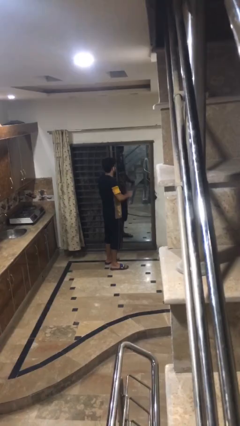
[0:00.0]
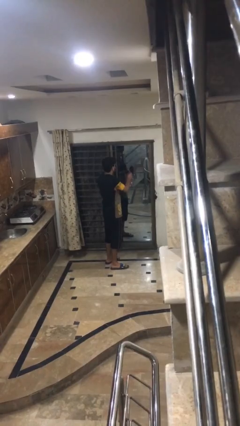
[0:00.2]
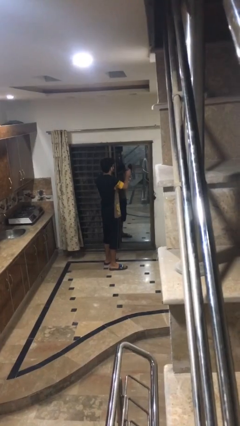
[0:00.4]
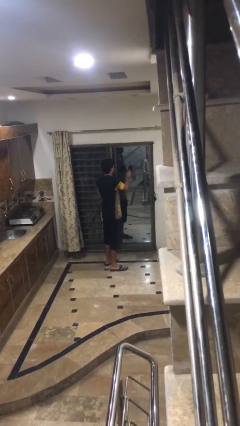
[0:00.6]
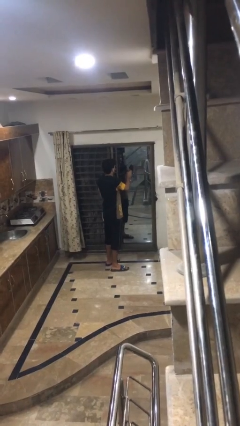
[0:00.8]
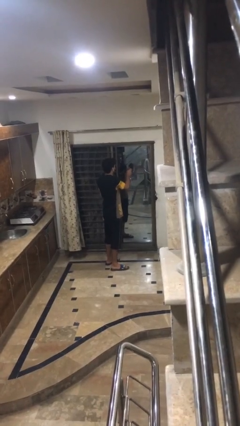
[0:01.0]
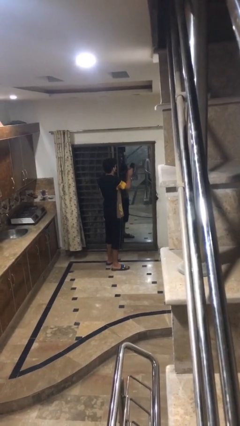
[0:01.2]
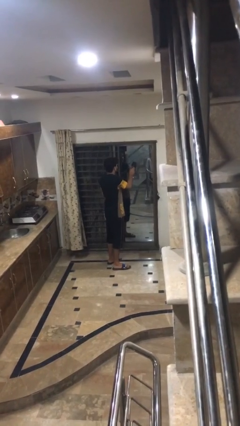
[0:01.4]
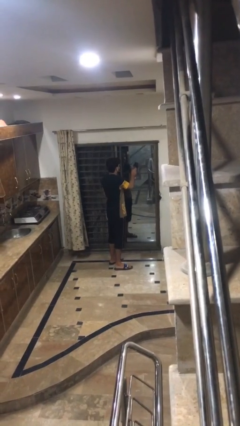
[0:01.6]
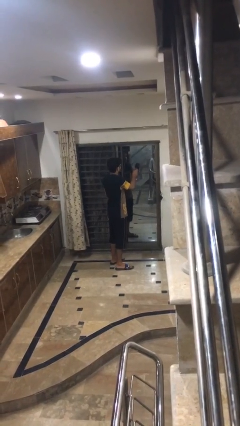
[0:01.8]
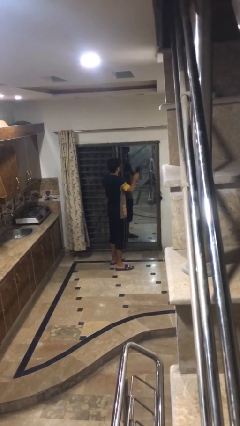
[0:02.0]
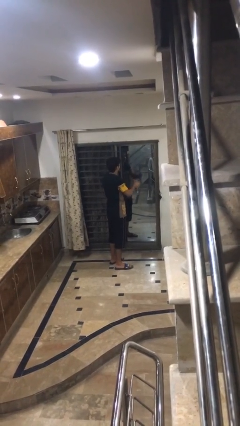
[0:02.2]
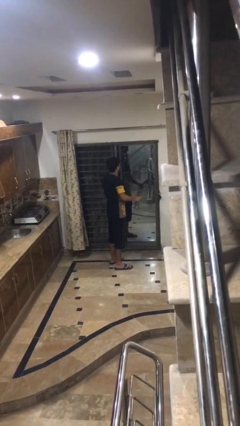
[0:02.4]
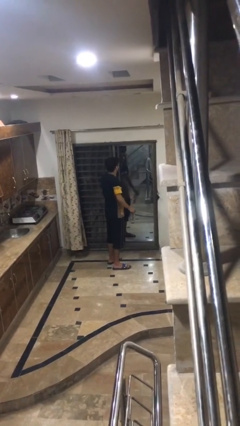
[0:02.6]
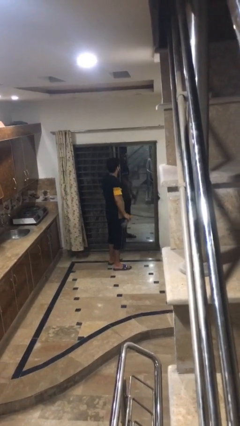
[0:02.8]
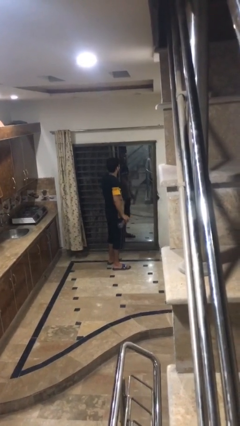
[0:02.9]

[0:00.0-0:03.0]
person sprays from bottle

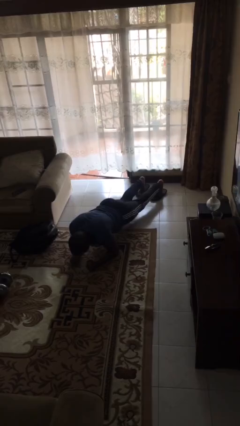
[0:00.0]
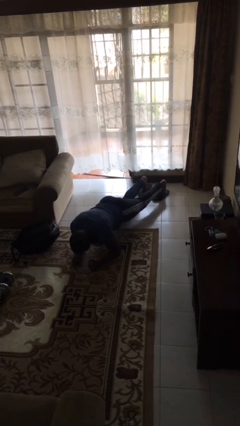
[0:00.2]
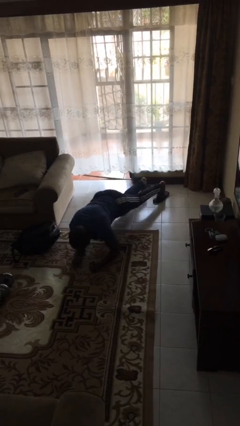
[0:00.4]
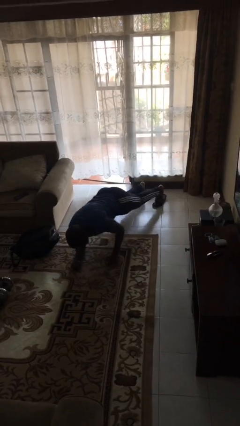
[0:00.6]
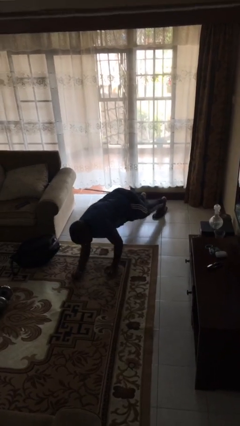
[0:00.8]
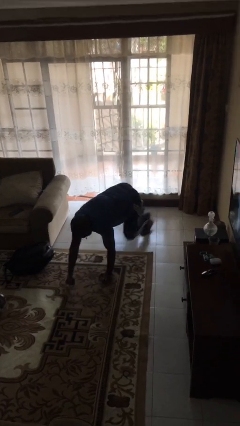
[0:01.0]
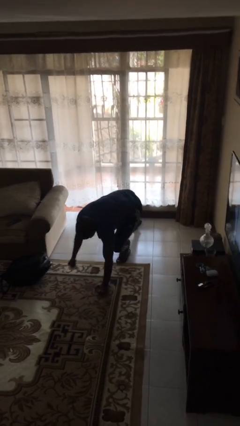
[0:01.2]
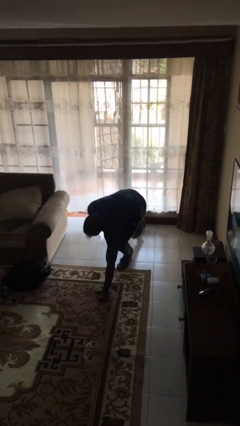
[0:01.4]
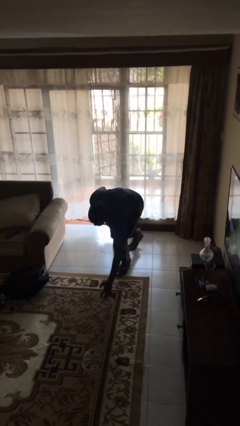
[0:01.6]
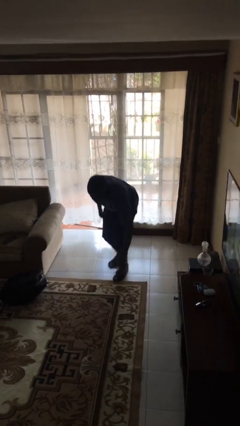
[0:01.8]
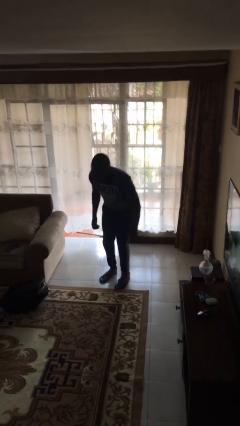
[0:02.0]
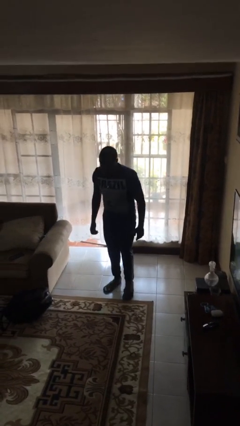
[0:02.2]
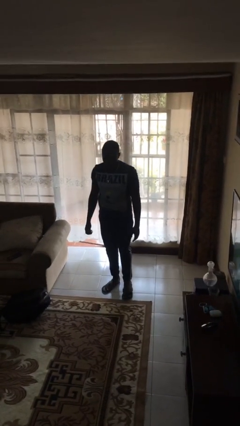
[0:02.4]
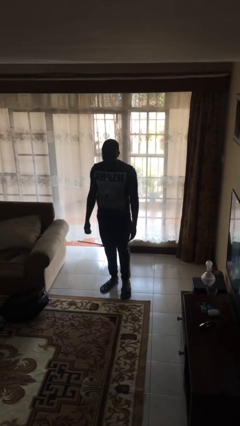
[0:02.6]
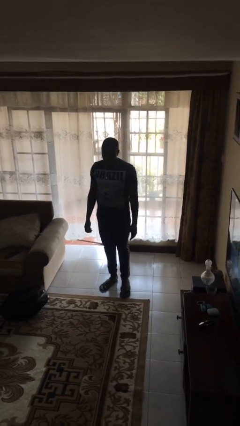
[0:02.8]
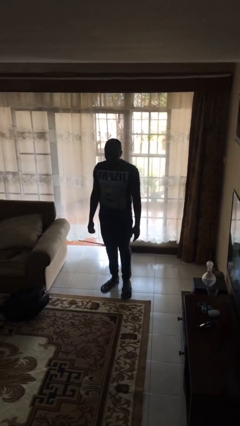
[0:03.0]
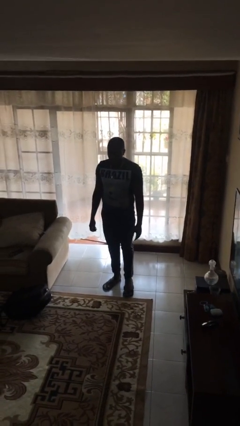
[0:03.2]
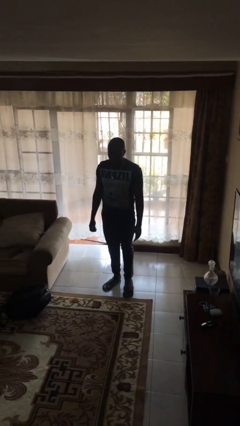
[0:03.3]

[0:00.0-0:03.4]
person stands up from floor

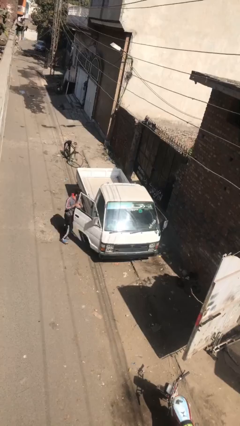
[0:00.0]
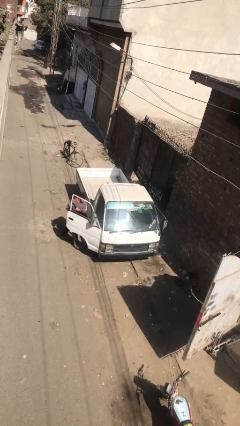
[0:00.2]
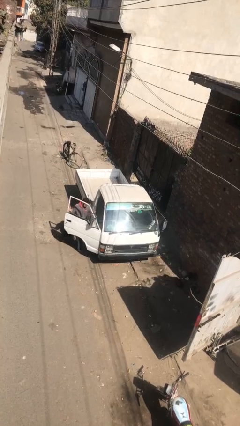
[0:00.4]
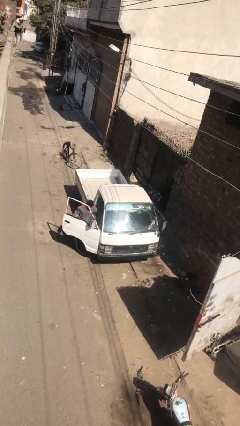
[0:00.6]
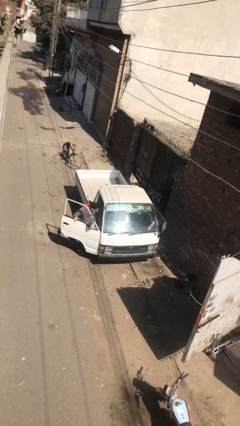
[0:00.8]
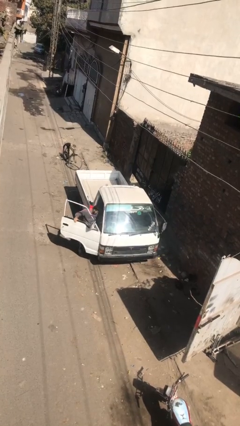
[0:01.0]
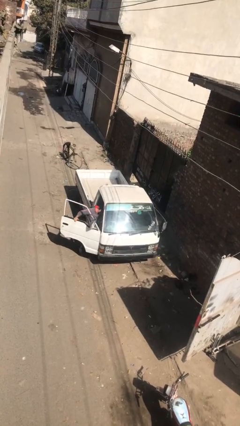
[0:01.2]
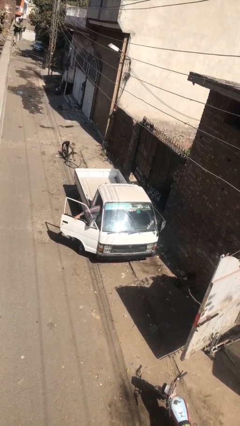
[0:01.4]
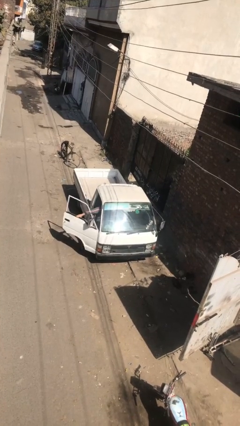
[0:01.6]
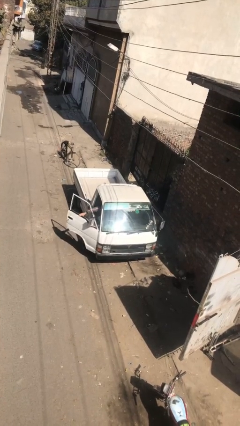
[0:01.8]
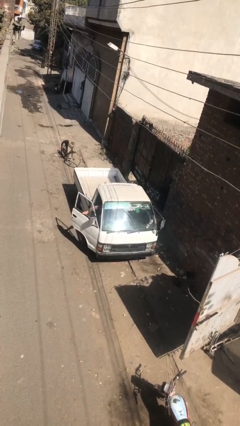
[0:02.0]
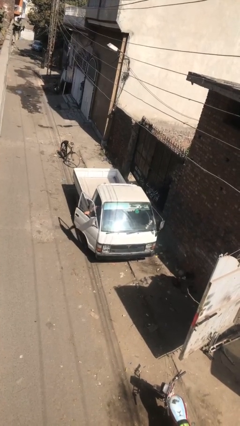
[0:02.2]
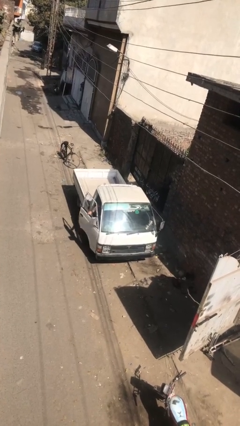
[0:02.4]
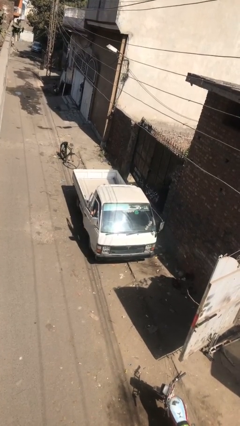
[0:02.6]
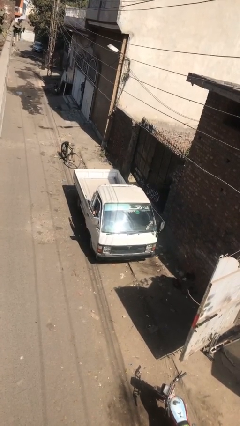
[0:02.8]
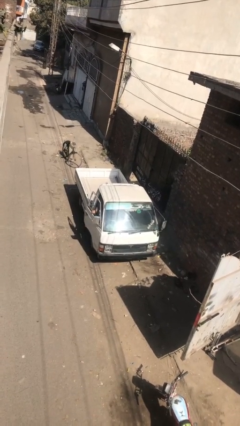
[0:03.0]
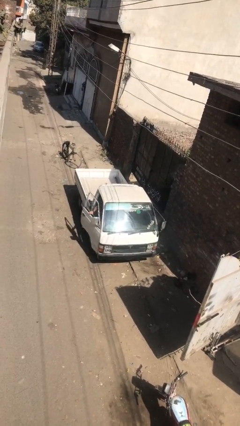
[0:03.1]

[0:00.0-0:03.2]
car picks up person

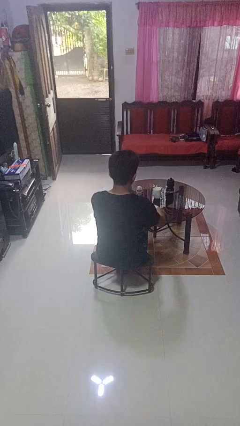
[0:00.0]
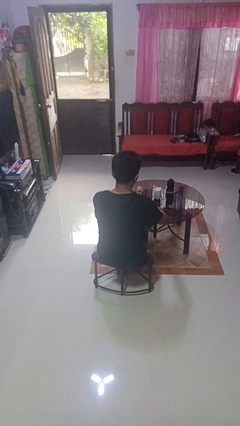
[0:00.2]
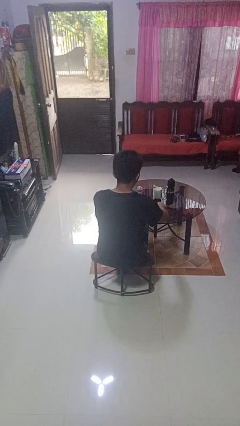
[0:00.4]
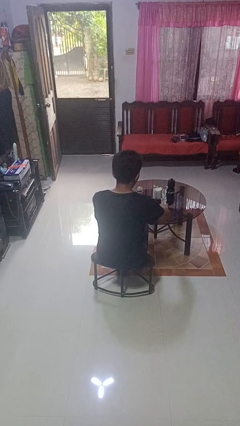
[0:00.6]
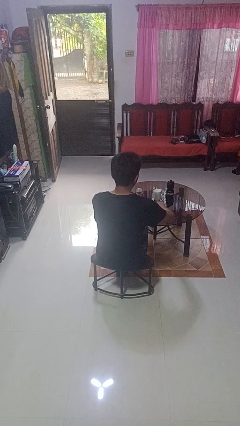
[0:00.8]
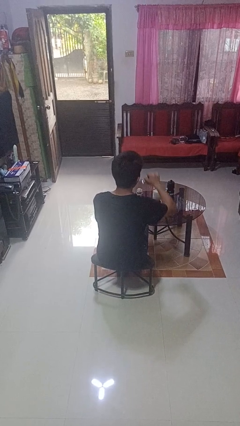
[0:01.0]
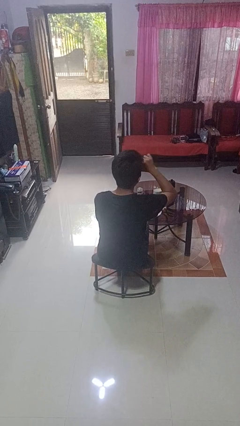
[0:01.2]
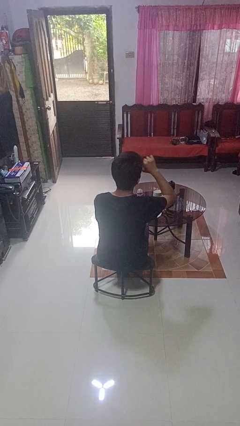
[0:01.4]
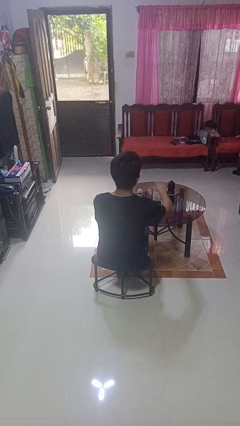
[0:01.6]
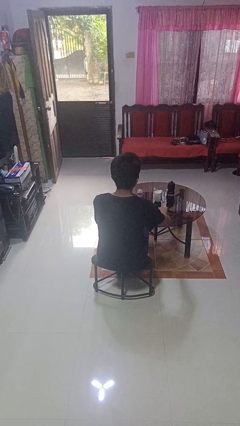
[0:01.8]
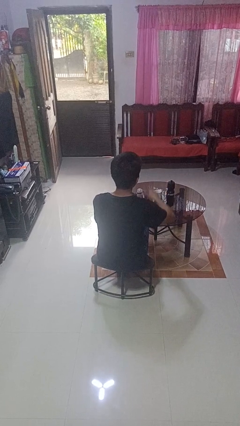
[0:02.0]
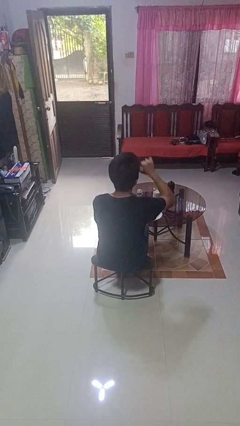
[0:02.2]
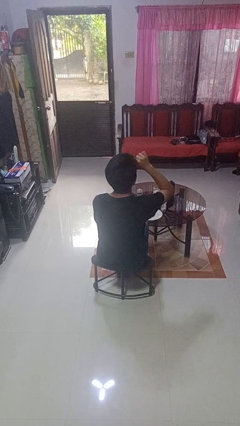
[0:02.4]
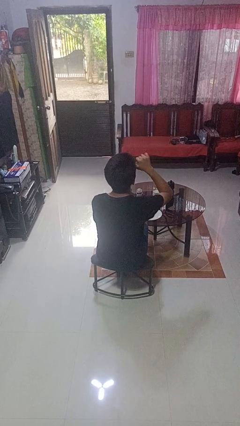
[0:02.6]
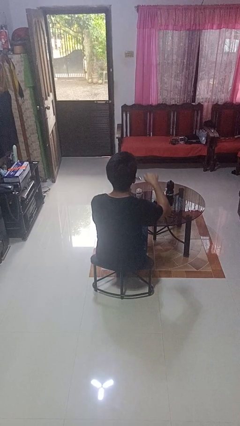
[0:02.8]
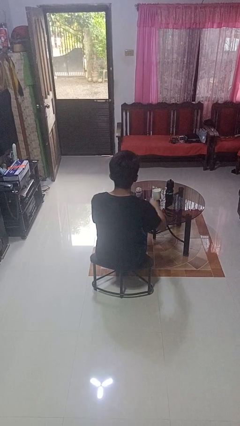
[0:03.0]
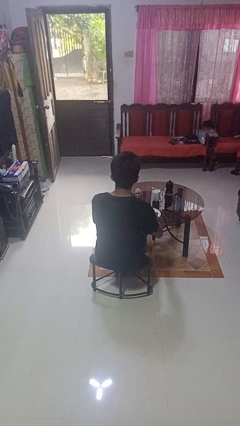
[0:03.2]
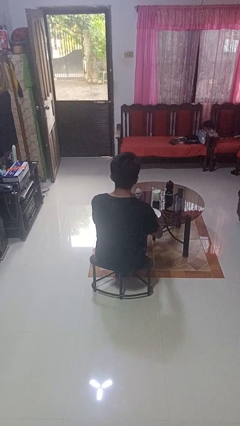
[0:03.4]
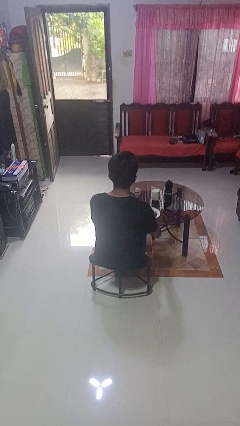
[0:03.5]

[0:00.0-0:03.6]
person eats with utensil

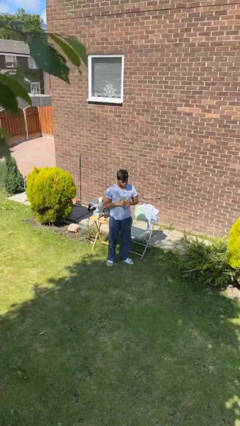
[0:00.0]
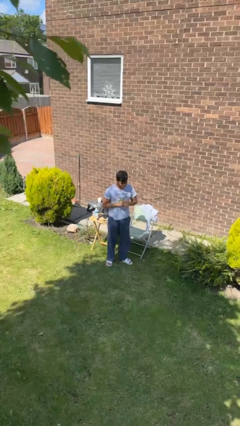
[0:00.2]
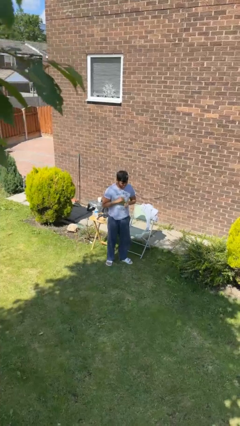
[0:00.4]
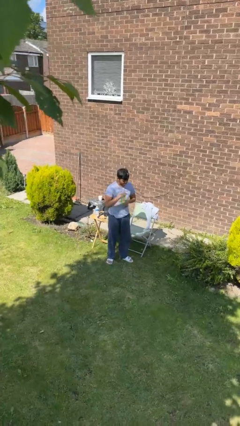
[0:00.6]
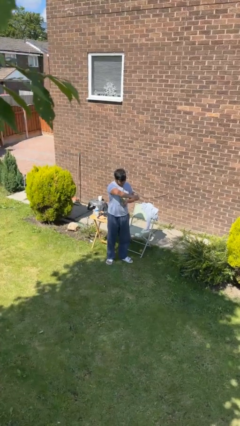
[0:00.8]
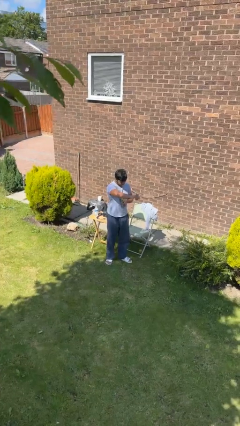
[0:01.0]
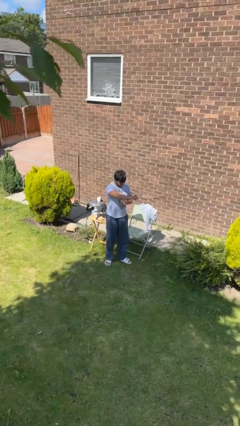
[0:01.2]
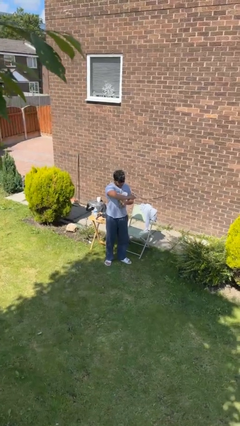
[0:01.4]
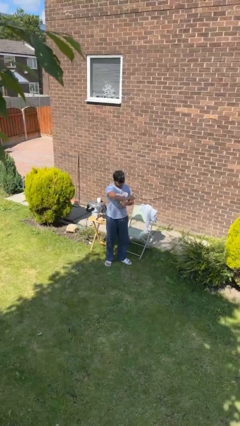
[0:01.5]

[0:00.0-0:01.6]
person punches

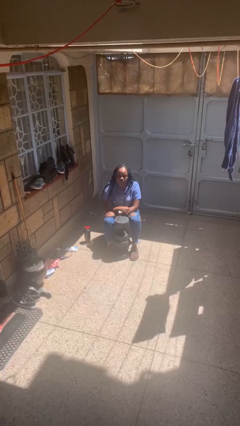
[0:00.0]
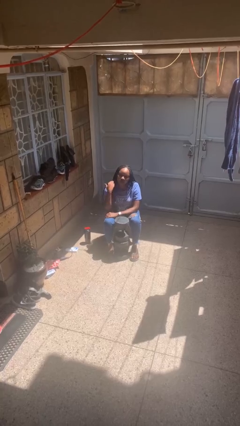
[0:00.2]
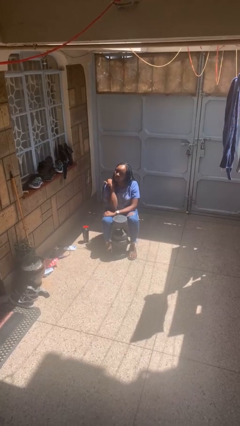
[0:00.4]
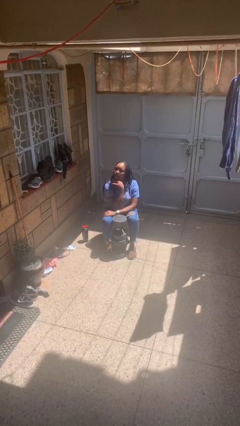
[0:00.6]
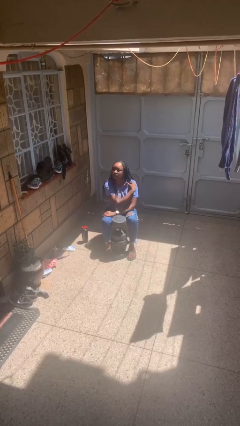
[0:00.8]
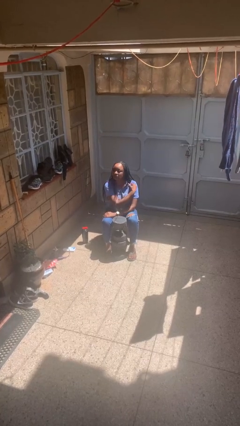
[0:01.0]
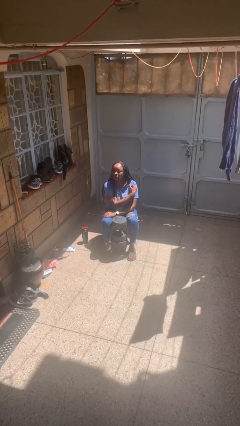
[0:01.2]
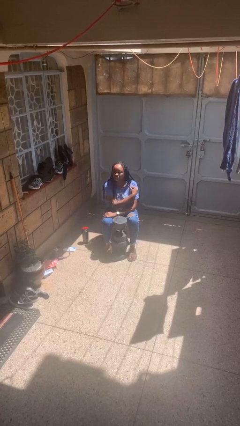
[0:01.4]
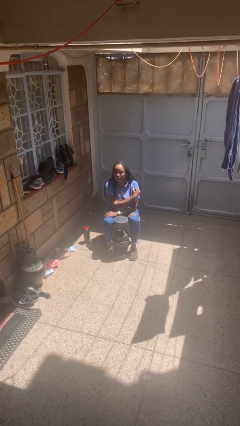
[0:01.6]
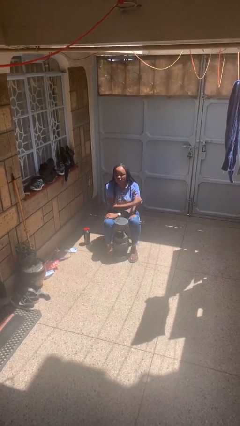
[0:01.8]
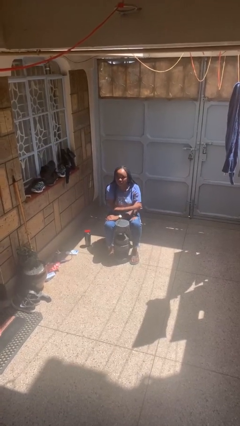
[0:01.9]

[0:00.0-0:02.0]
person gestures cut

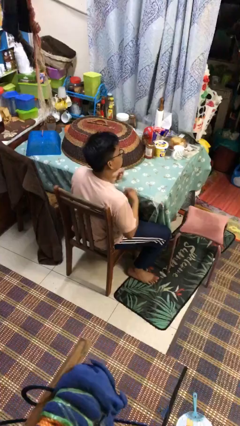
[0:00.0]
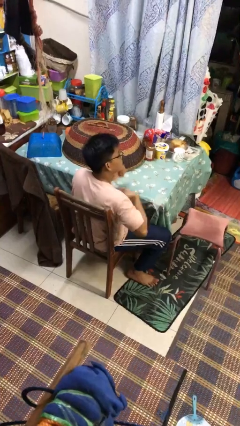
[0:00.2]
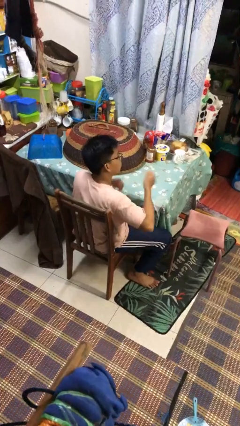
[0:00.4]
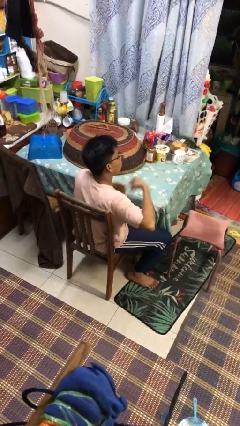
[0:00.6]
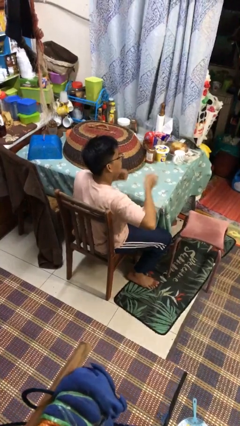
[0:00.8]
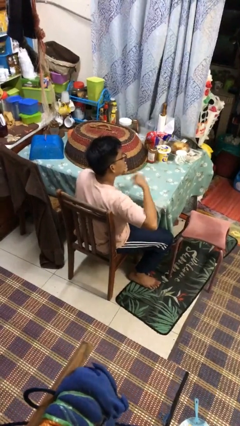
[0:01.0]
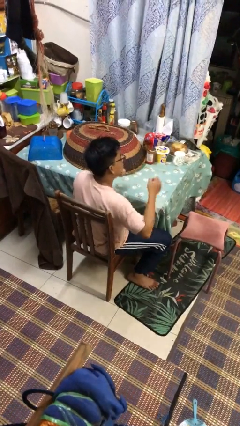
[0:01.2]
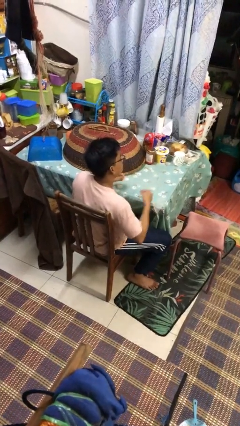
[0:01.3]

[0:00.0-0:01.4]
person drums on chest
